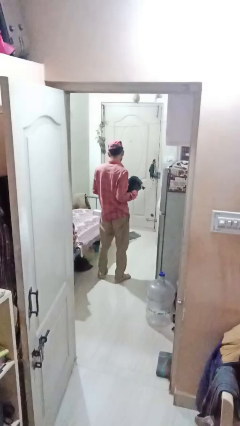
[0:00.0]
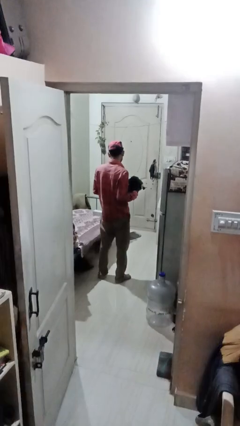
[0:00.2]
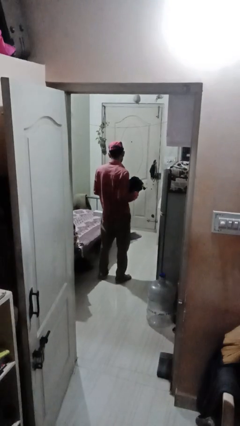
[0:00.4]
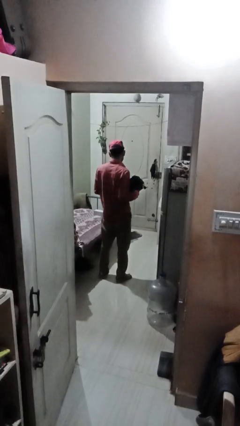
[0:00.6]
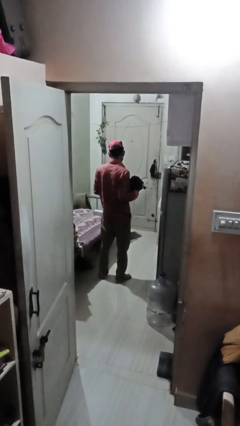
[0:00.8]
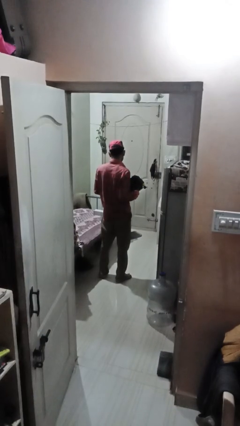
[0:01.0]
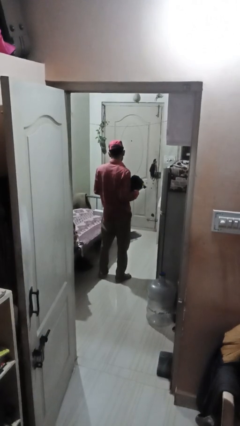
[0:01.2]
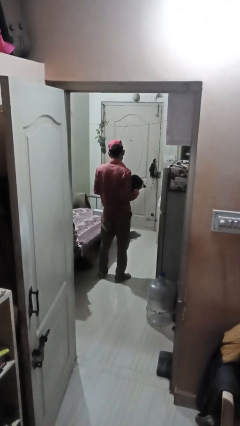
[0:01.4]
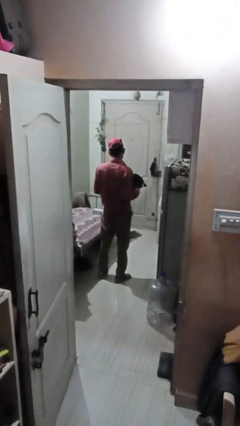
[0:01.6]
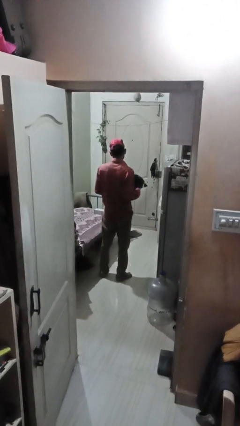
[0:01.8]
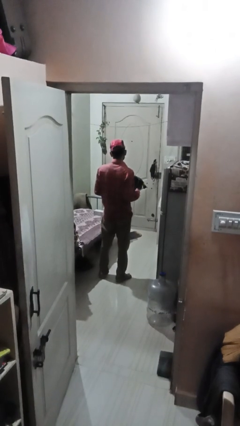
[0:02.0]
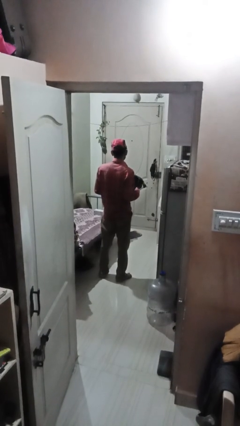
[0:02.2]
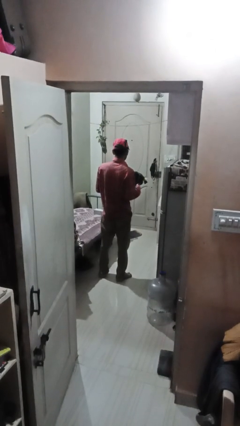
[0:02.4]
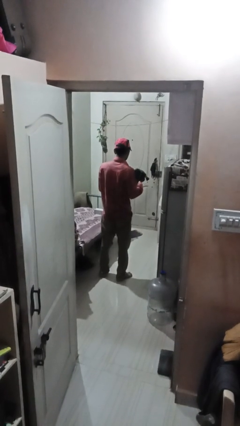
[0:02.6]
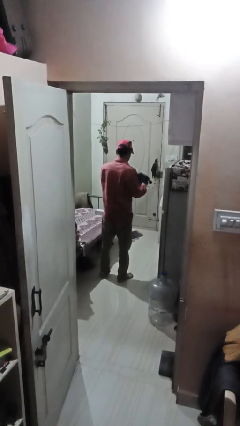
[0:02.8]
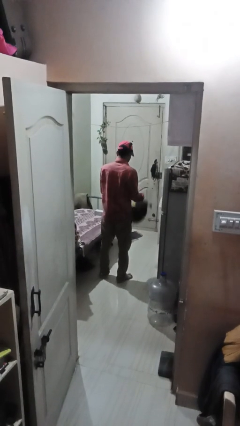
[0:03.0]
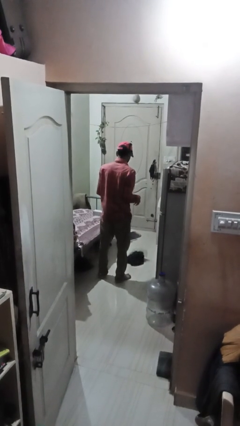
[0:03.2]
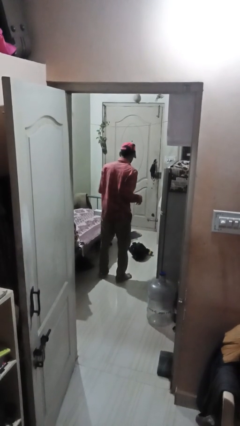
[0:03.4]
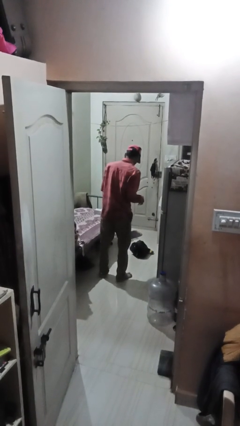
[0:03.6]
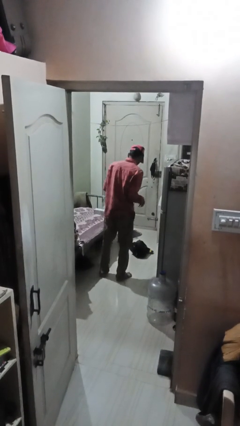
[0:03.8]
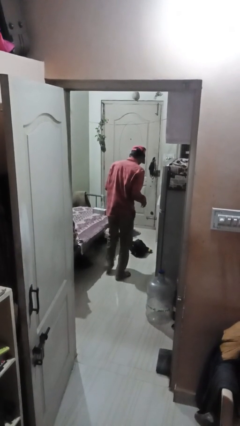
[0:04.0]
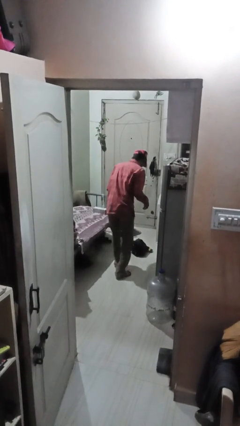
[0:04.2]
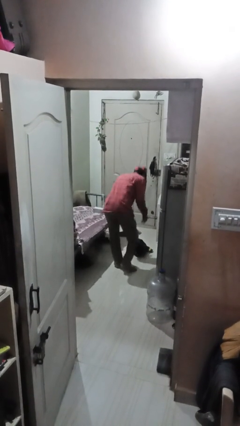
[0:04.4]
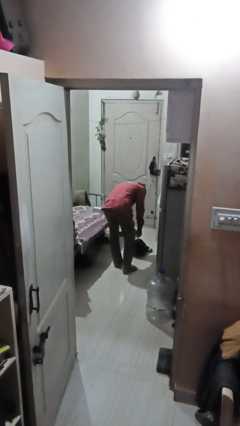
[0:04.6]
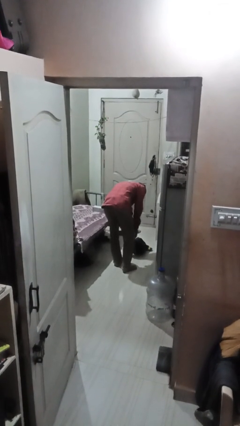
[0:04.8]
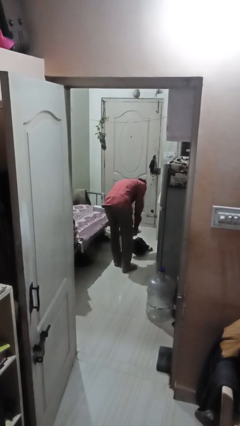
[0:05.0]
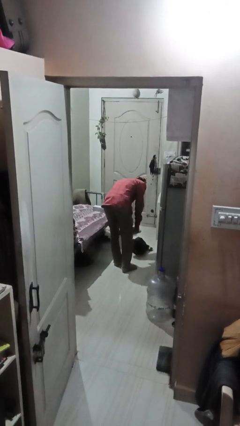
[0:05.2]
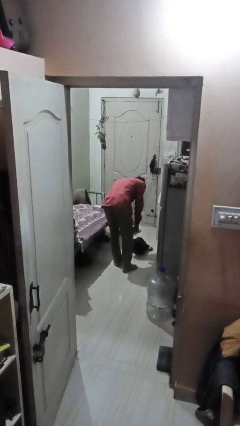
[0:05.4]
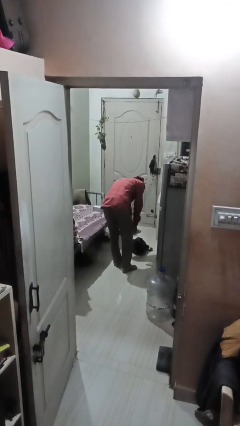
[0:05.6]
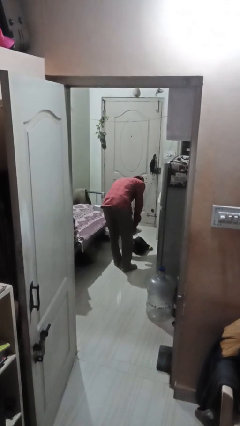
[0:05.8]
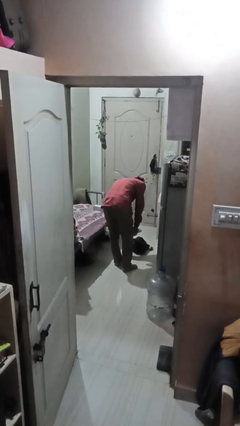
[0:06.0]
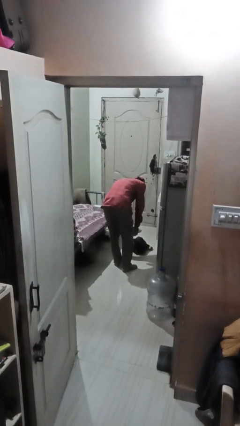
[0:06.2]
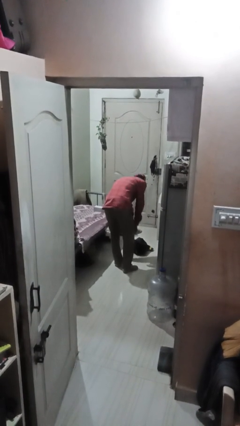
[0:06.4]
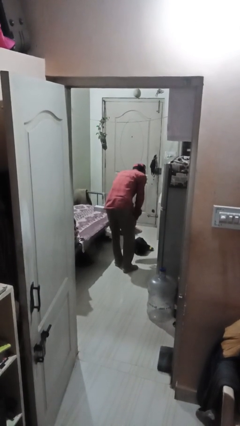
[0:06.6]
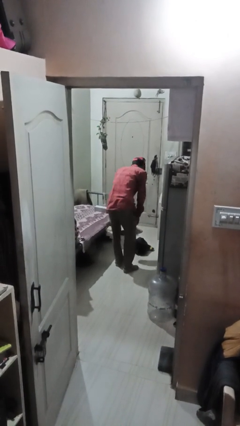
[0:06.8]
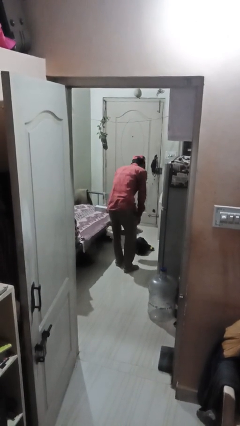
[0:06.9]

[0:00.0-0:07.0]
person drops object

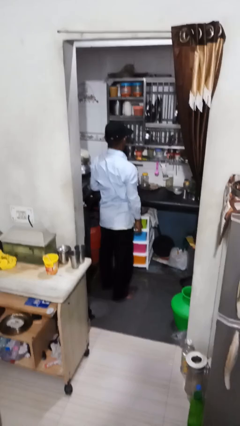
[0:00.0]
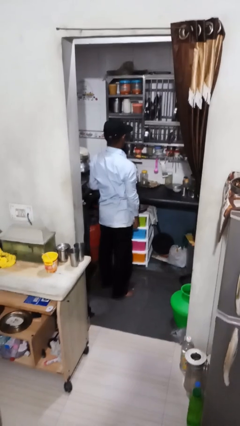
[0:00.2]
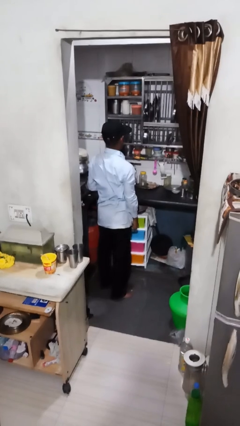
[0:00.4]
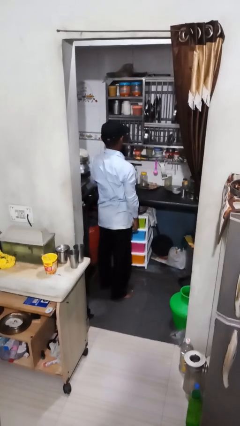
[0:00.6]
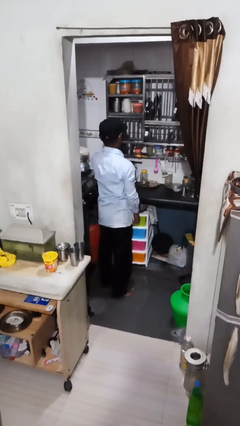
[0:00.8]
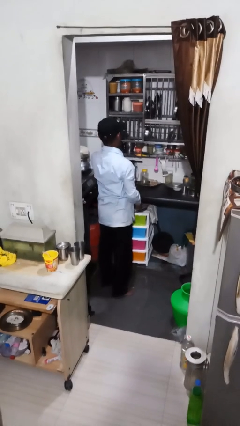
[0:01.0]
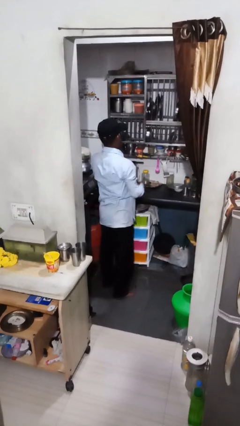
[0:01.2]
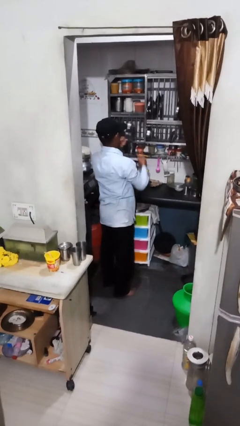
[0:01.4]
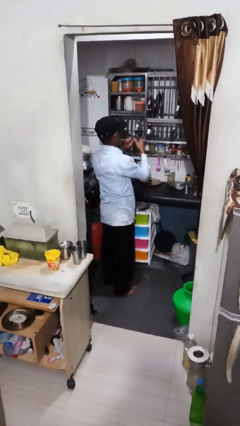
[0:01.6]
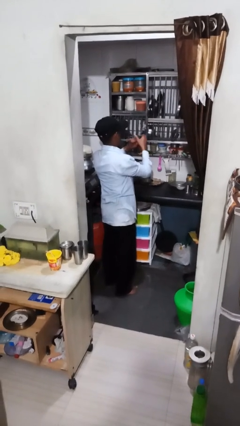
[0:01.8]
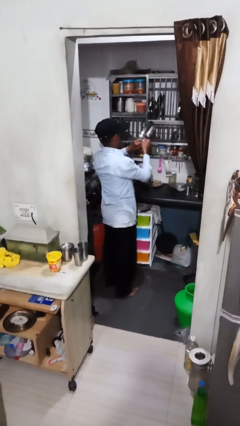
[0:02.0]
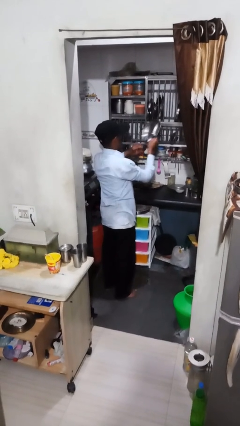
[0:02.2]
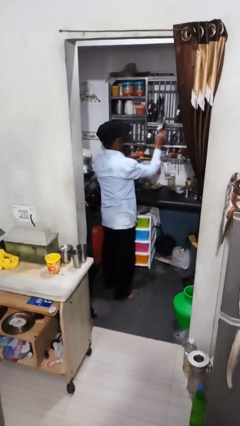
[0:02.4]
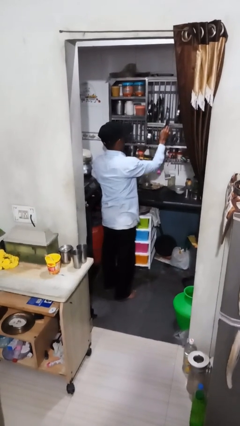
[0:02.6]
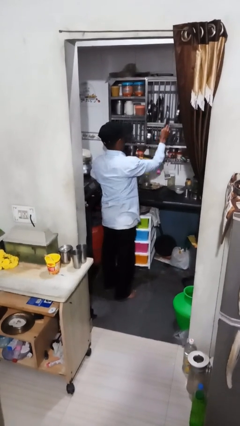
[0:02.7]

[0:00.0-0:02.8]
person takes object from cabinet

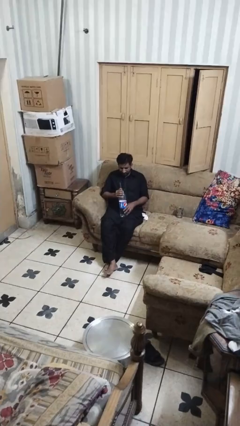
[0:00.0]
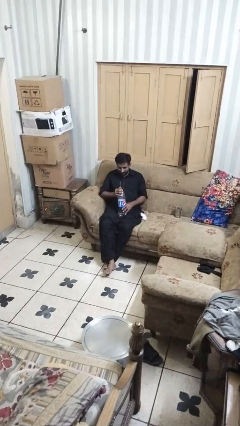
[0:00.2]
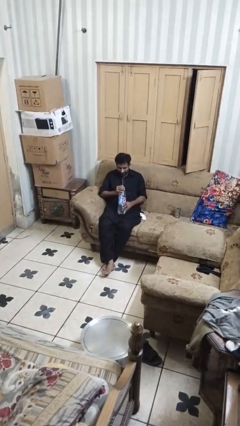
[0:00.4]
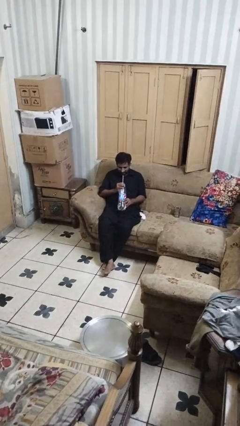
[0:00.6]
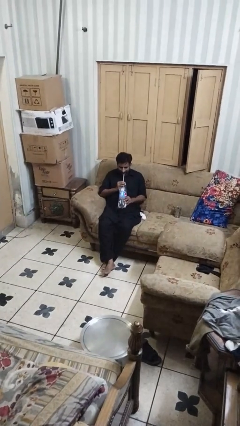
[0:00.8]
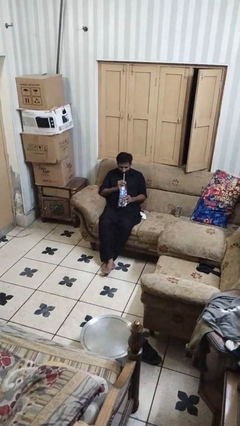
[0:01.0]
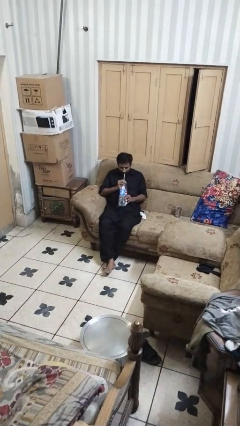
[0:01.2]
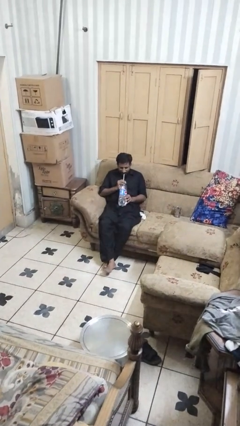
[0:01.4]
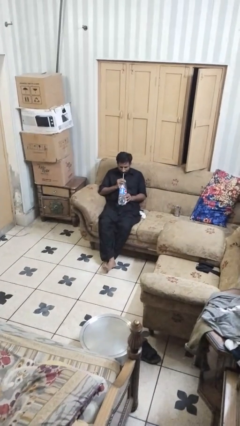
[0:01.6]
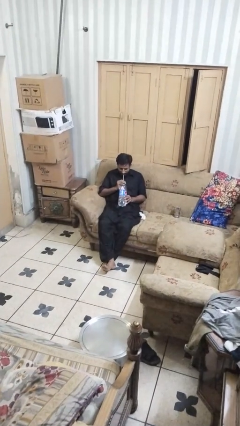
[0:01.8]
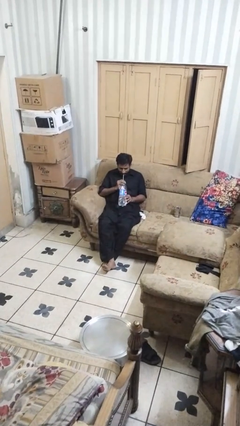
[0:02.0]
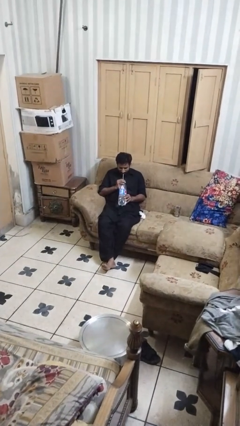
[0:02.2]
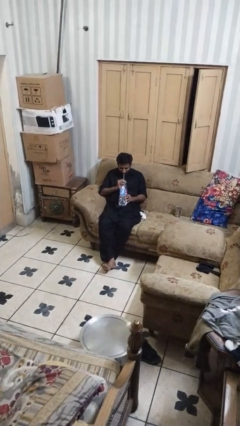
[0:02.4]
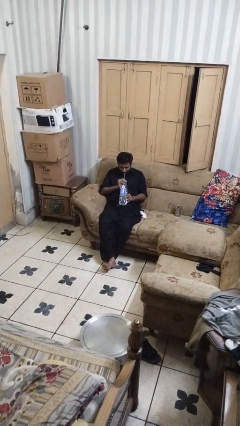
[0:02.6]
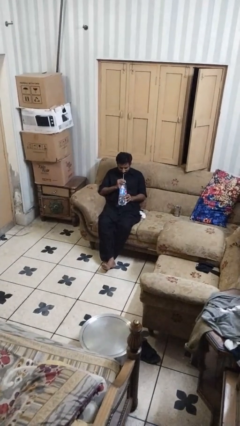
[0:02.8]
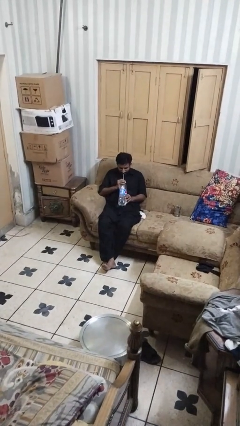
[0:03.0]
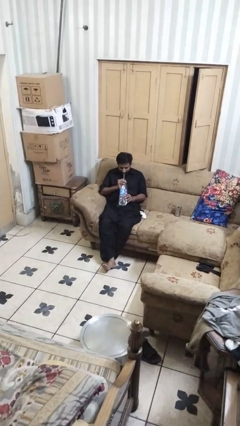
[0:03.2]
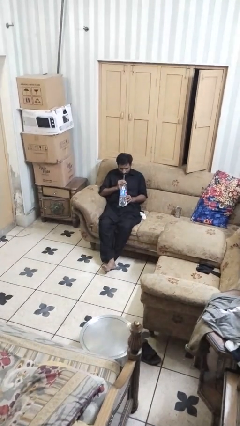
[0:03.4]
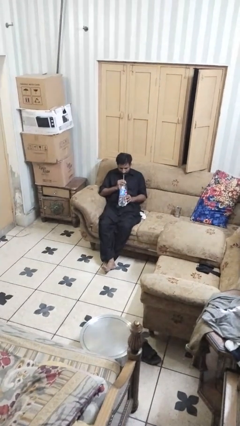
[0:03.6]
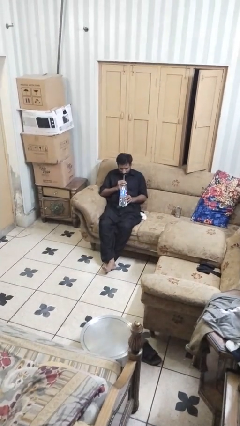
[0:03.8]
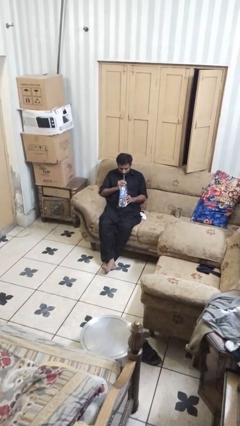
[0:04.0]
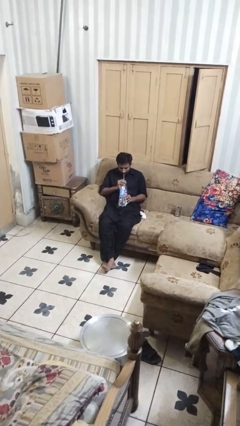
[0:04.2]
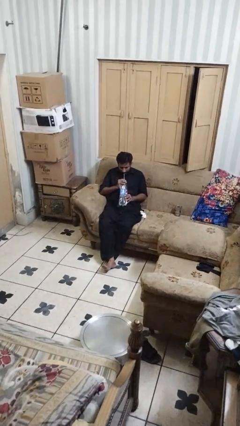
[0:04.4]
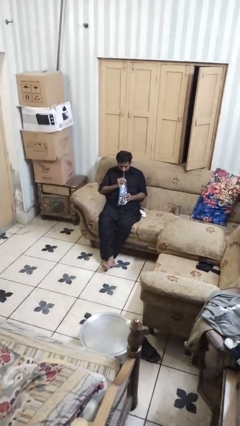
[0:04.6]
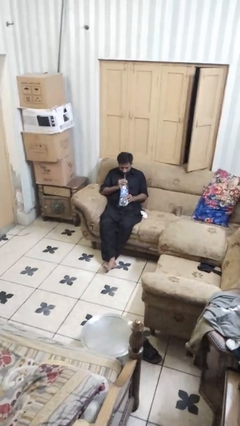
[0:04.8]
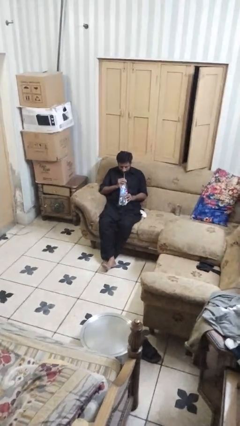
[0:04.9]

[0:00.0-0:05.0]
person drinks from straw

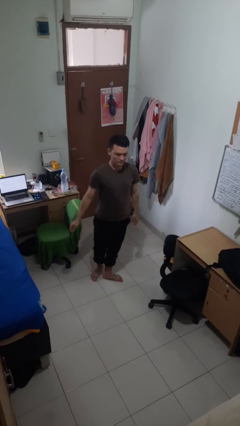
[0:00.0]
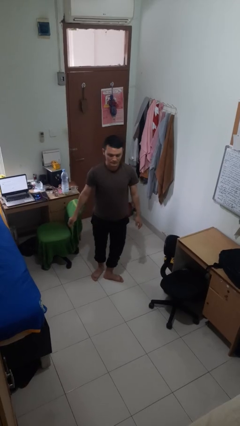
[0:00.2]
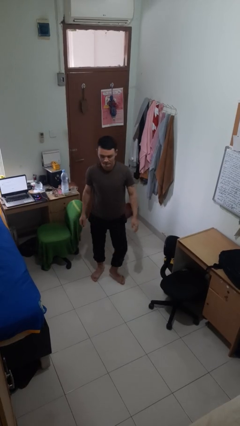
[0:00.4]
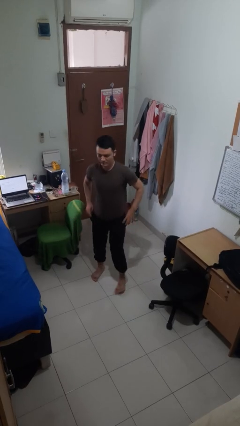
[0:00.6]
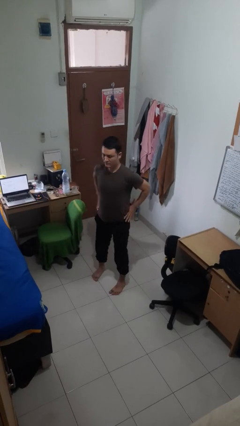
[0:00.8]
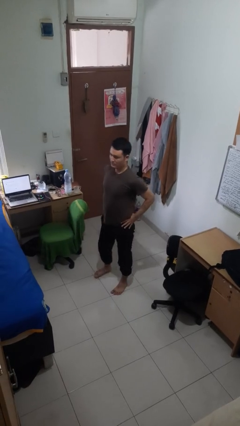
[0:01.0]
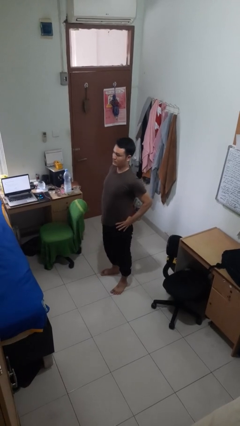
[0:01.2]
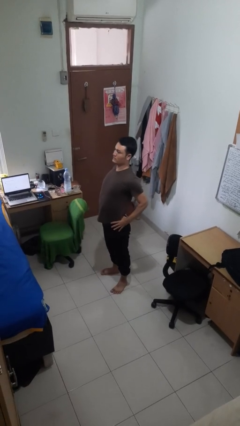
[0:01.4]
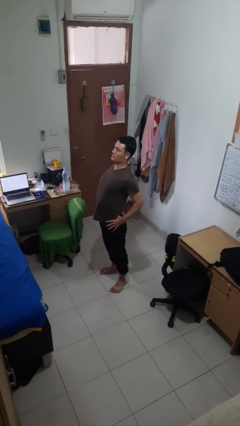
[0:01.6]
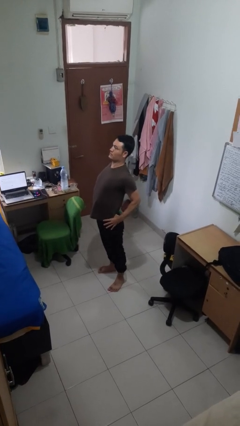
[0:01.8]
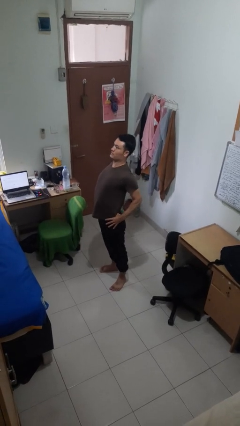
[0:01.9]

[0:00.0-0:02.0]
person stretches back

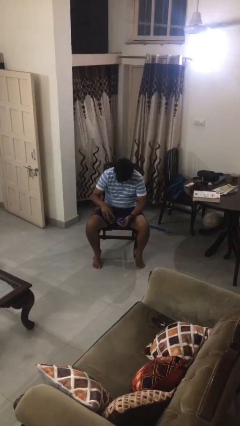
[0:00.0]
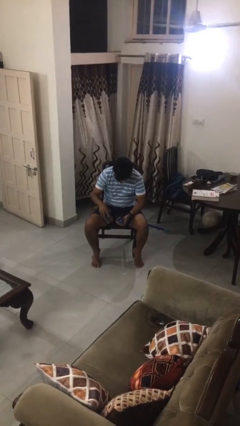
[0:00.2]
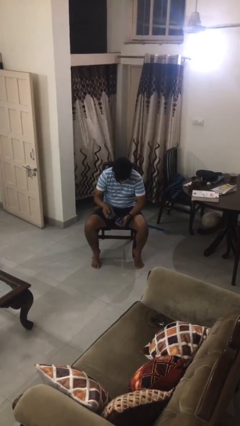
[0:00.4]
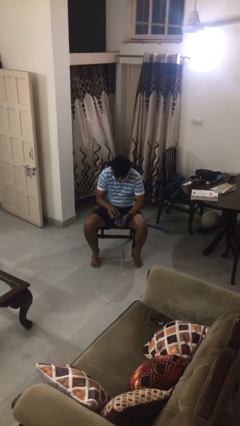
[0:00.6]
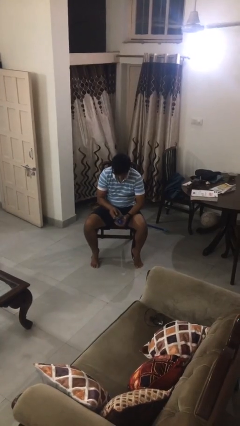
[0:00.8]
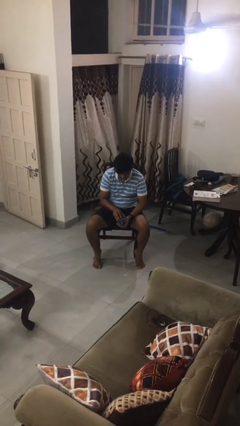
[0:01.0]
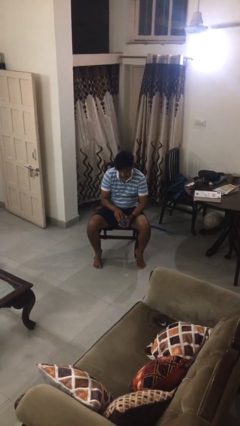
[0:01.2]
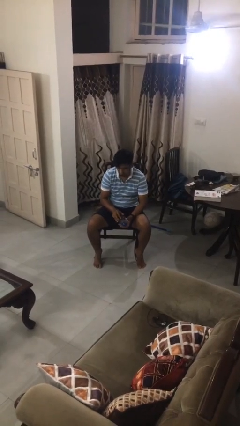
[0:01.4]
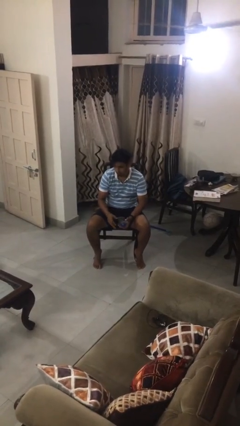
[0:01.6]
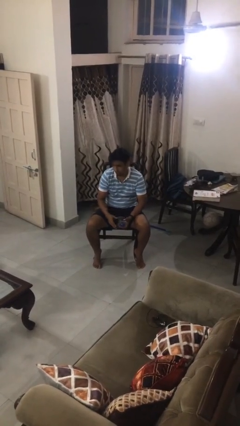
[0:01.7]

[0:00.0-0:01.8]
person closes jewelry box
